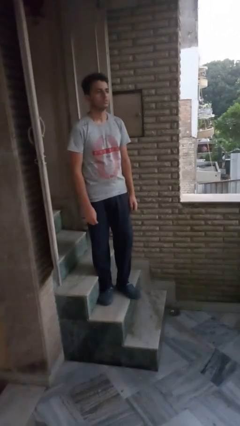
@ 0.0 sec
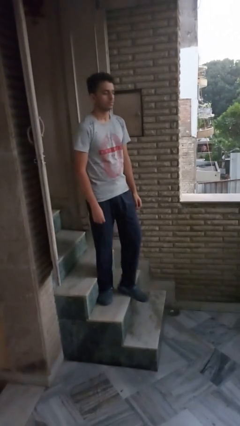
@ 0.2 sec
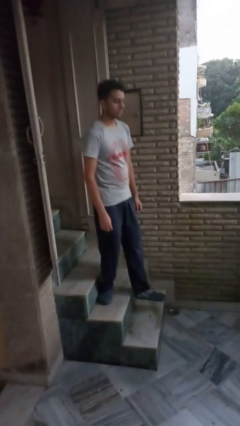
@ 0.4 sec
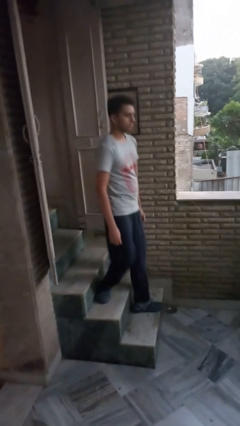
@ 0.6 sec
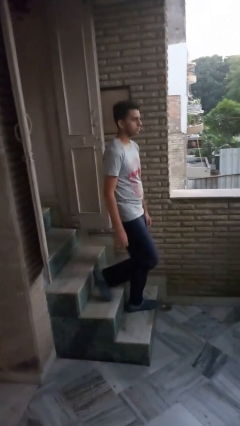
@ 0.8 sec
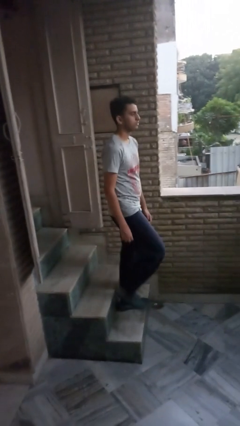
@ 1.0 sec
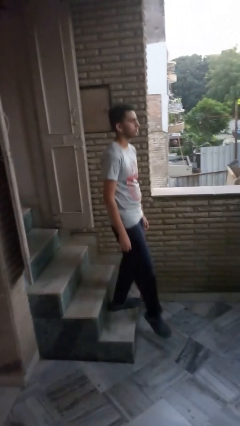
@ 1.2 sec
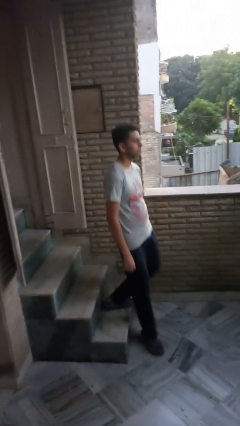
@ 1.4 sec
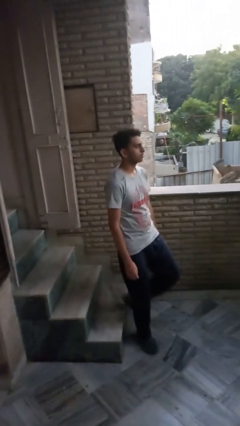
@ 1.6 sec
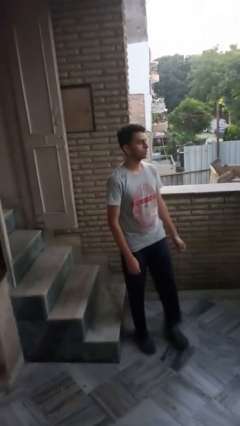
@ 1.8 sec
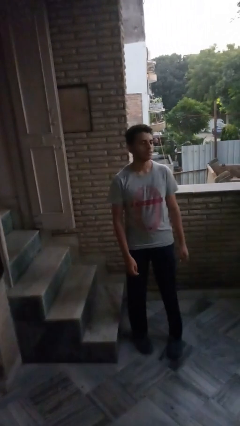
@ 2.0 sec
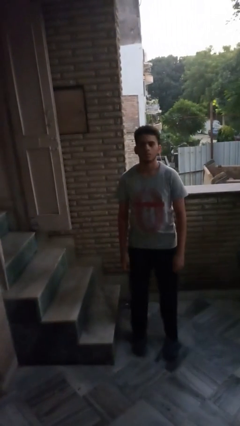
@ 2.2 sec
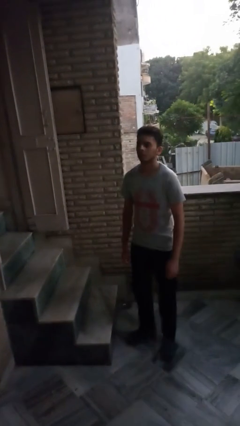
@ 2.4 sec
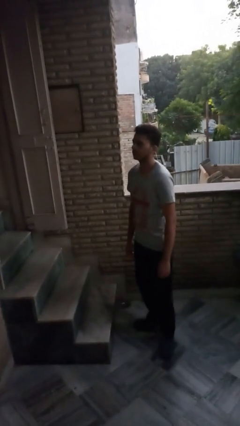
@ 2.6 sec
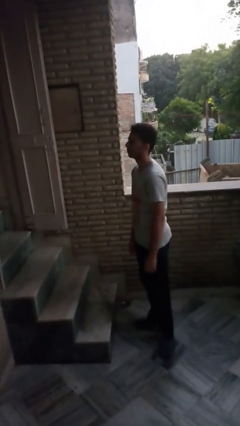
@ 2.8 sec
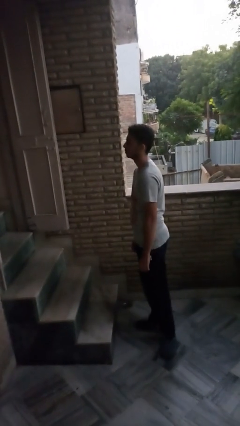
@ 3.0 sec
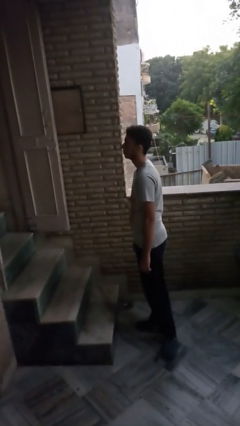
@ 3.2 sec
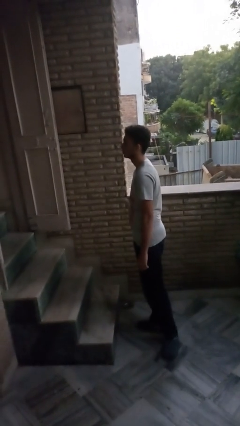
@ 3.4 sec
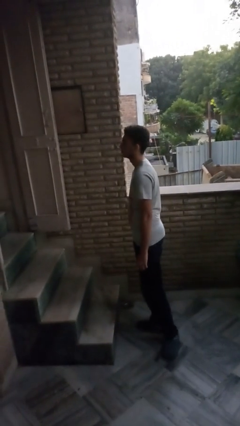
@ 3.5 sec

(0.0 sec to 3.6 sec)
person climbs down stairs

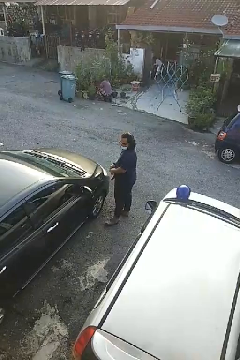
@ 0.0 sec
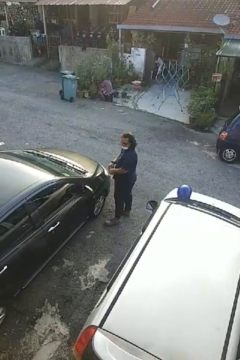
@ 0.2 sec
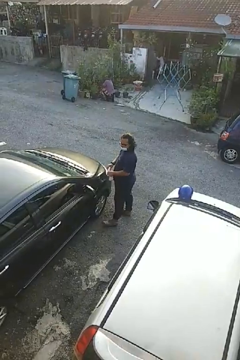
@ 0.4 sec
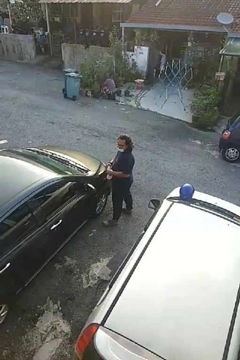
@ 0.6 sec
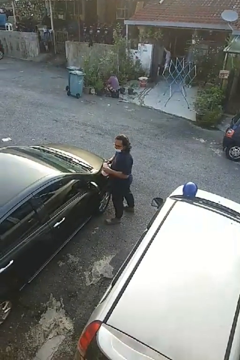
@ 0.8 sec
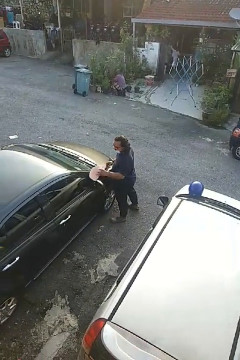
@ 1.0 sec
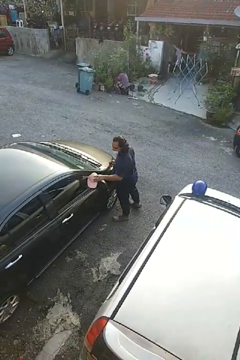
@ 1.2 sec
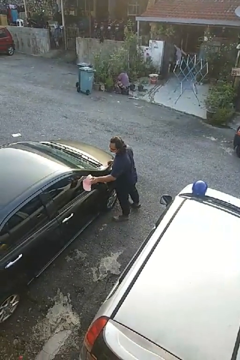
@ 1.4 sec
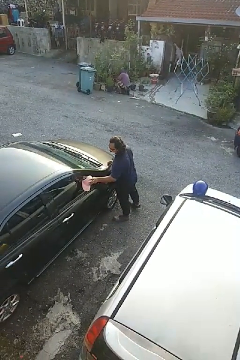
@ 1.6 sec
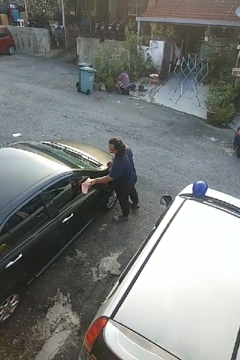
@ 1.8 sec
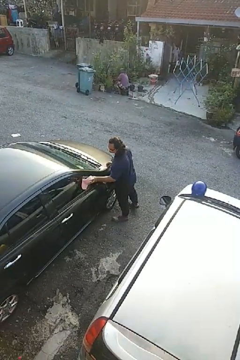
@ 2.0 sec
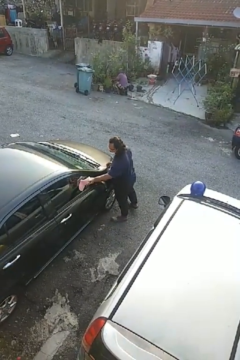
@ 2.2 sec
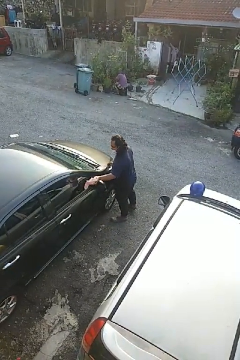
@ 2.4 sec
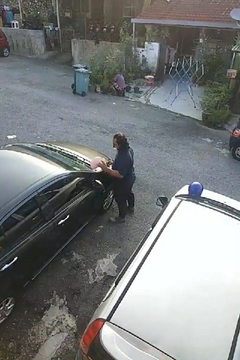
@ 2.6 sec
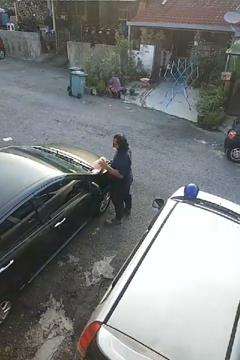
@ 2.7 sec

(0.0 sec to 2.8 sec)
person polishes car with rag

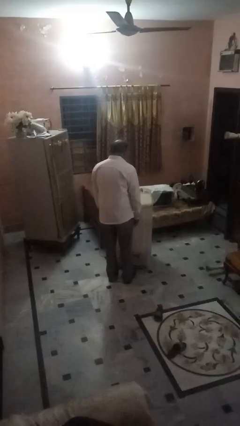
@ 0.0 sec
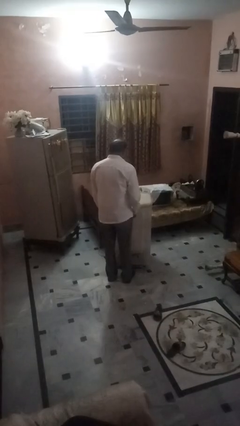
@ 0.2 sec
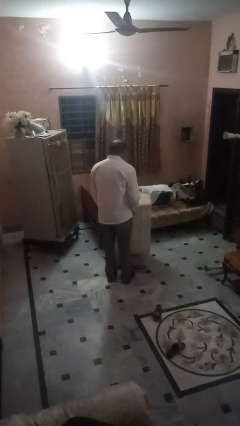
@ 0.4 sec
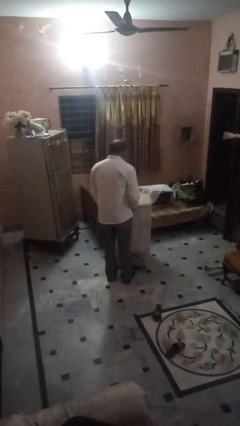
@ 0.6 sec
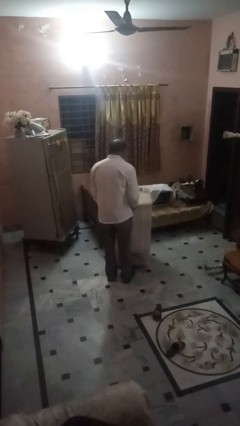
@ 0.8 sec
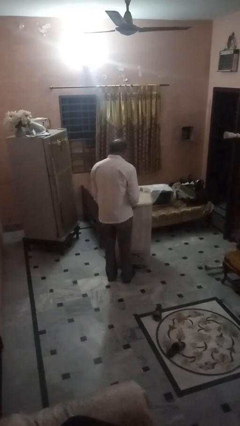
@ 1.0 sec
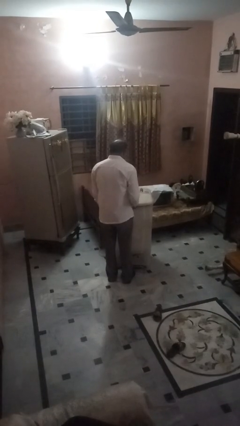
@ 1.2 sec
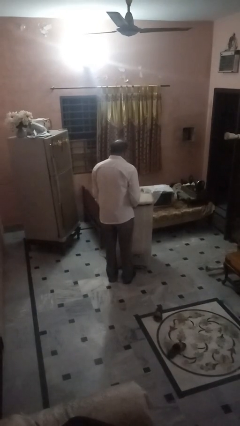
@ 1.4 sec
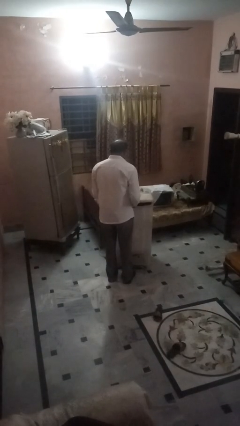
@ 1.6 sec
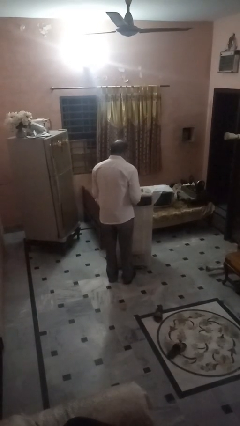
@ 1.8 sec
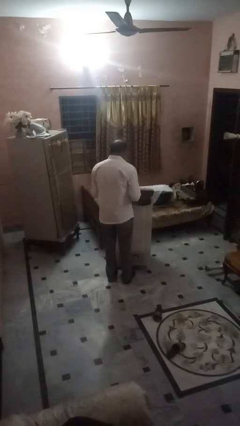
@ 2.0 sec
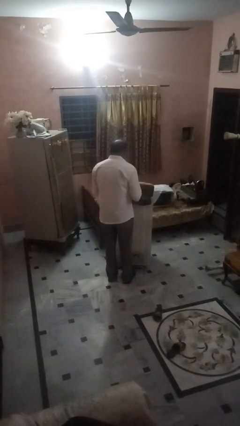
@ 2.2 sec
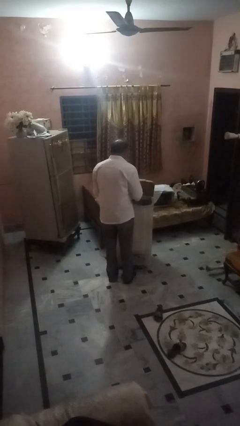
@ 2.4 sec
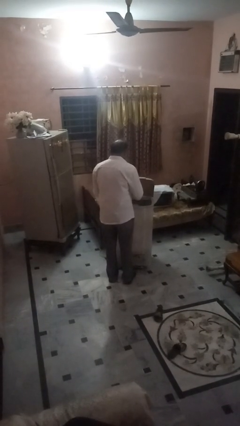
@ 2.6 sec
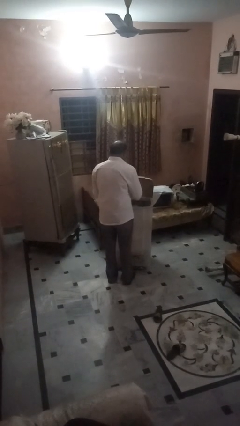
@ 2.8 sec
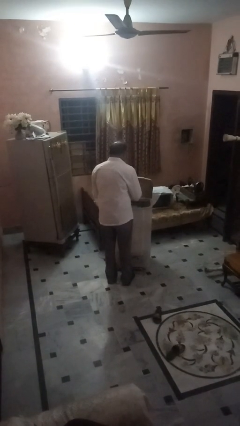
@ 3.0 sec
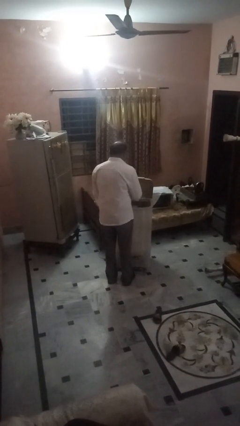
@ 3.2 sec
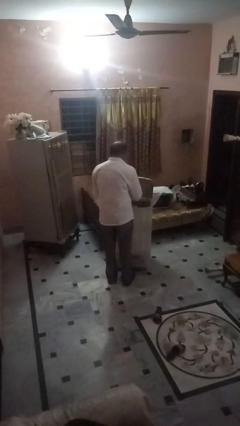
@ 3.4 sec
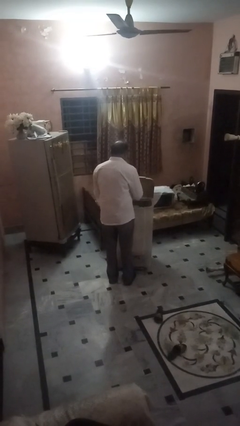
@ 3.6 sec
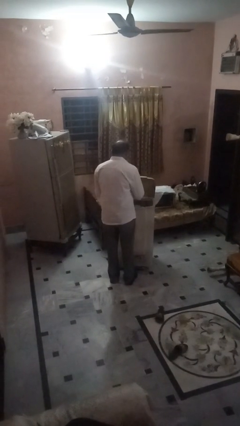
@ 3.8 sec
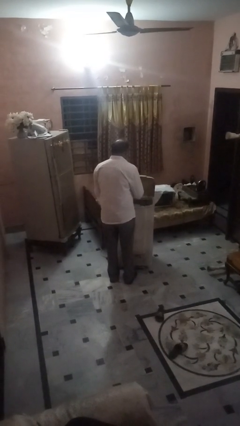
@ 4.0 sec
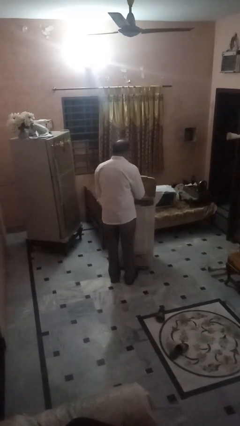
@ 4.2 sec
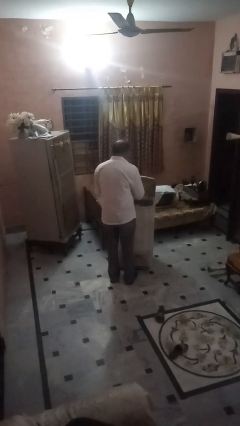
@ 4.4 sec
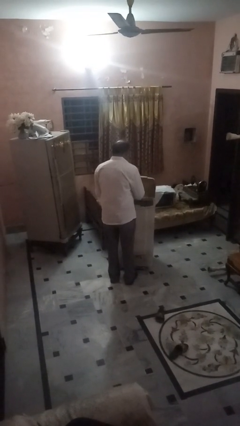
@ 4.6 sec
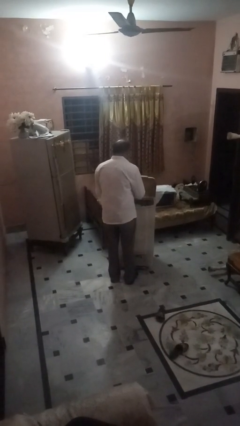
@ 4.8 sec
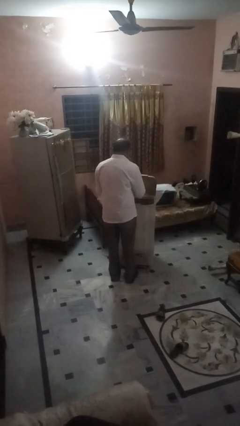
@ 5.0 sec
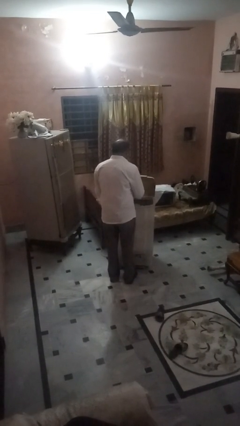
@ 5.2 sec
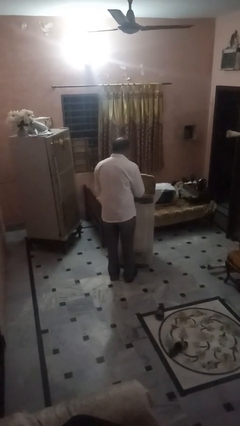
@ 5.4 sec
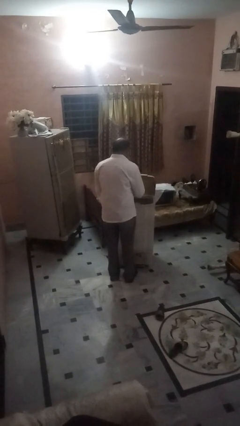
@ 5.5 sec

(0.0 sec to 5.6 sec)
person opens clothes washer

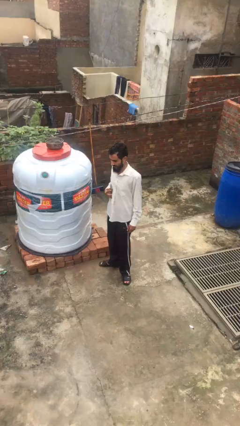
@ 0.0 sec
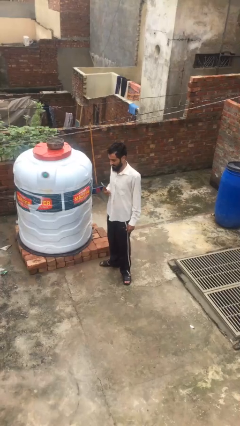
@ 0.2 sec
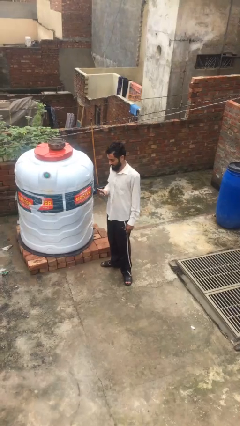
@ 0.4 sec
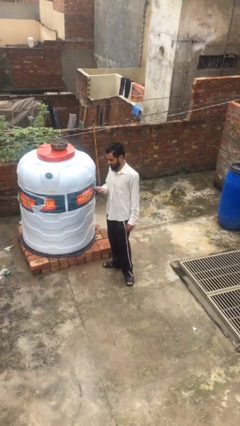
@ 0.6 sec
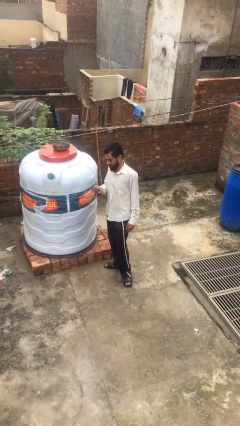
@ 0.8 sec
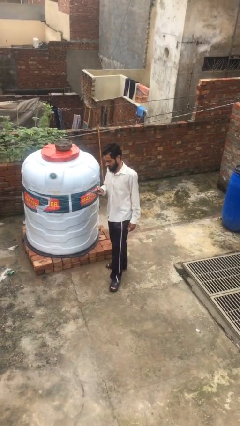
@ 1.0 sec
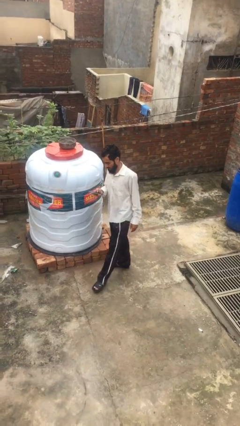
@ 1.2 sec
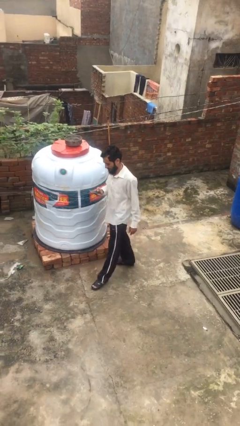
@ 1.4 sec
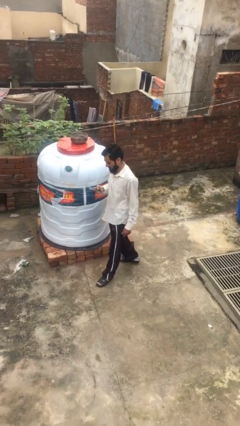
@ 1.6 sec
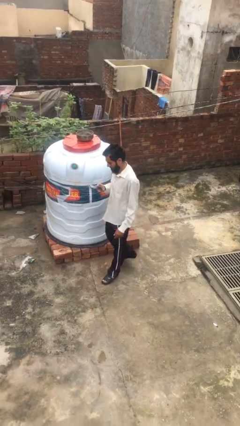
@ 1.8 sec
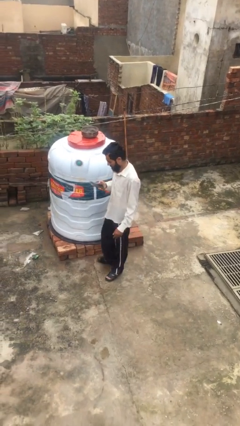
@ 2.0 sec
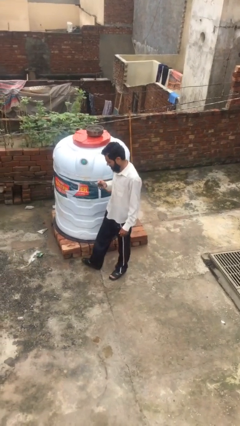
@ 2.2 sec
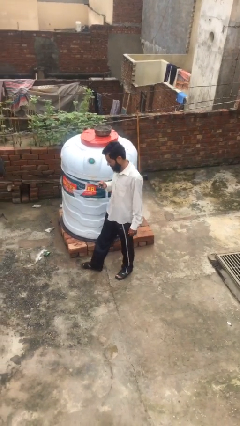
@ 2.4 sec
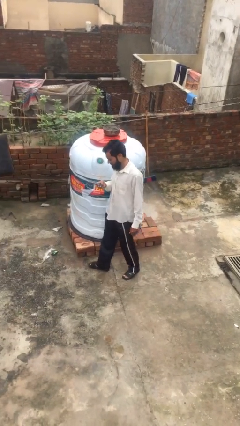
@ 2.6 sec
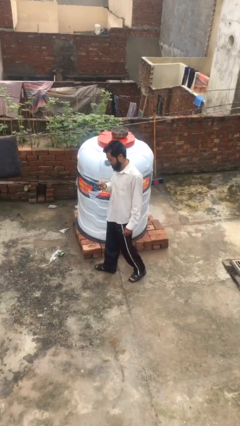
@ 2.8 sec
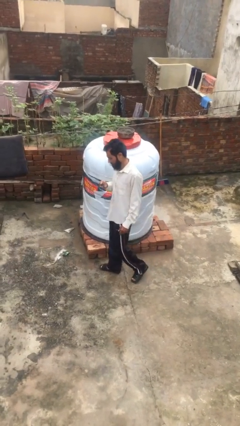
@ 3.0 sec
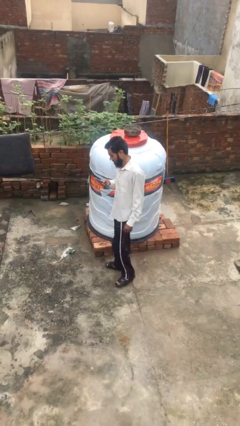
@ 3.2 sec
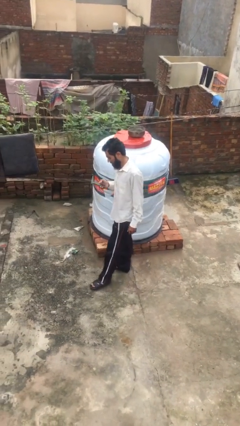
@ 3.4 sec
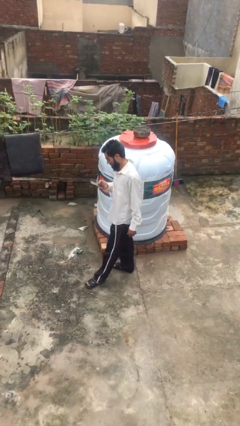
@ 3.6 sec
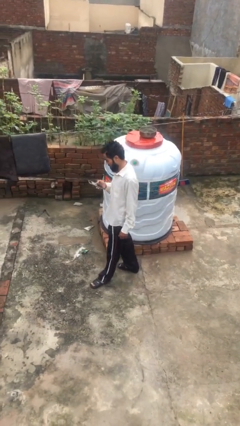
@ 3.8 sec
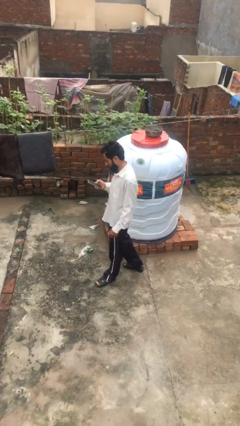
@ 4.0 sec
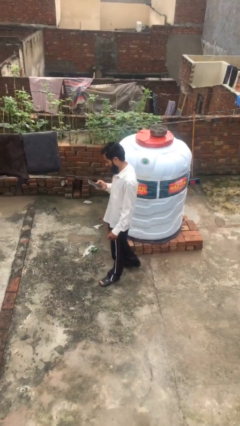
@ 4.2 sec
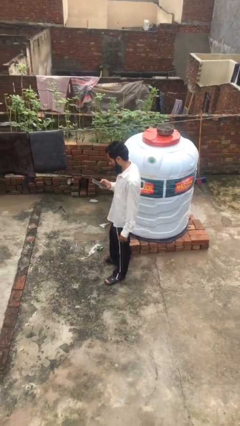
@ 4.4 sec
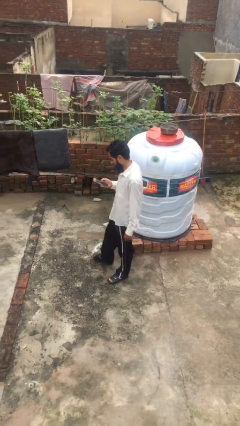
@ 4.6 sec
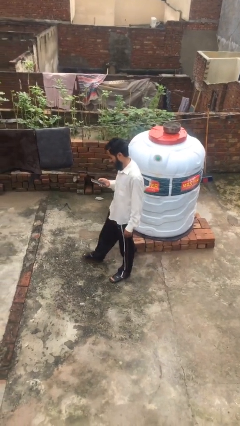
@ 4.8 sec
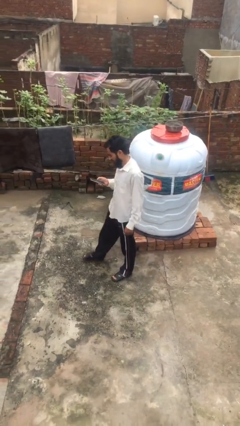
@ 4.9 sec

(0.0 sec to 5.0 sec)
person texts on phone

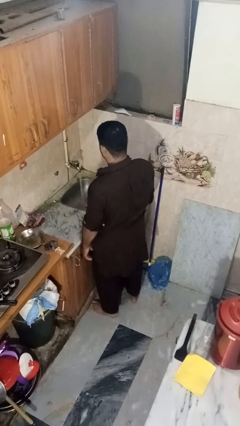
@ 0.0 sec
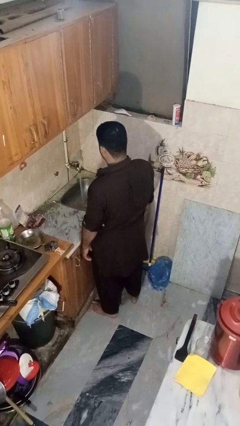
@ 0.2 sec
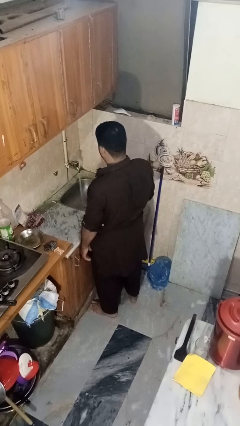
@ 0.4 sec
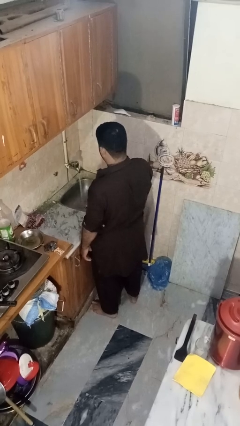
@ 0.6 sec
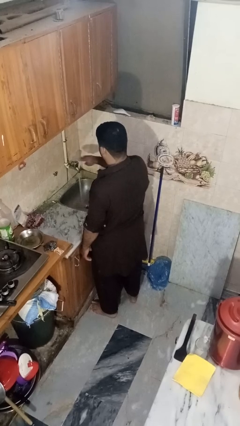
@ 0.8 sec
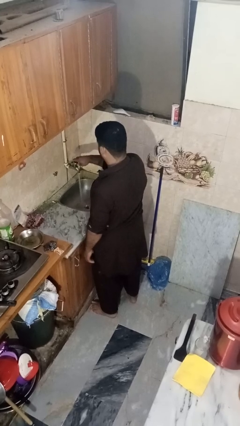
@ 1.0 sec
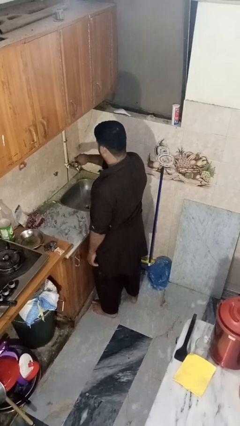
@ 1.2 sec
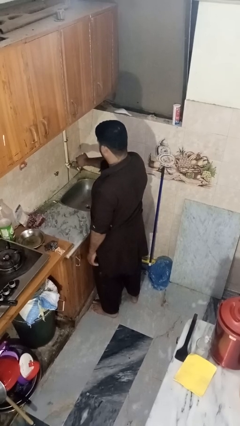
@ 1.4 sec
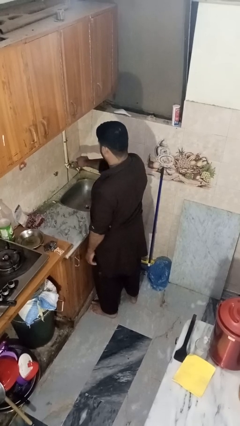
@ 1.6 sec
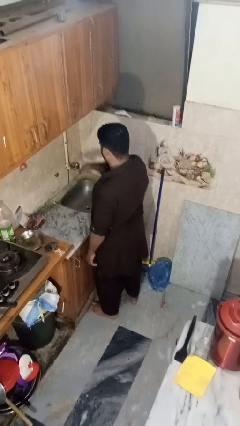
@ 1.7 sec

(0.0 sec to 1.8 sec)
person turns off faucet
